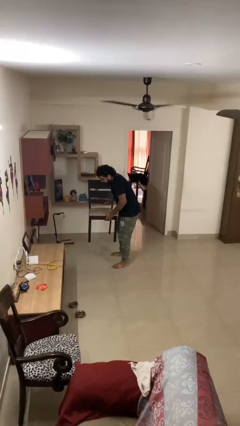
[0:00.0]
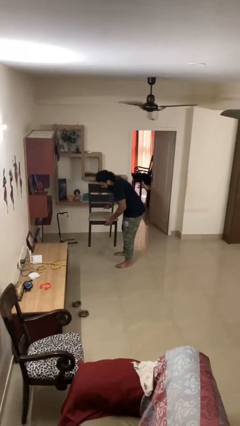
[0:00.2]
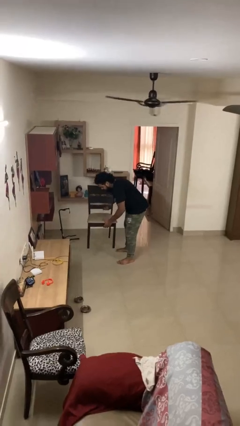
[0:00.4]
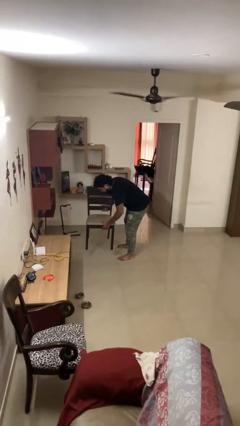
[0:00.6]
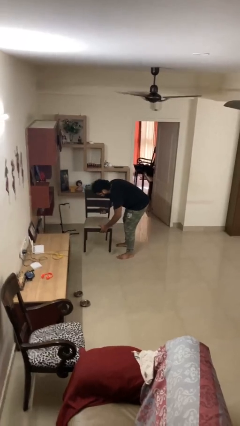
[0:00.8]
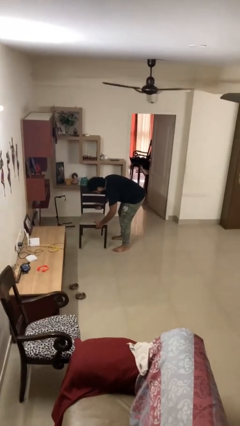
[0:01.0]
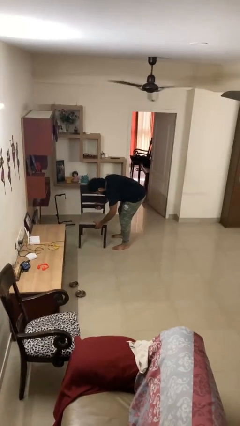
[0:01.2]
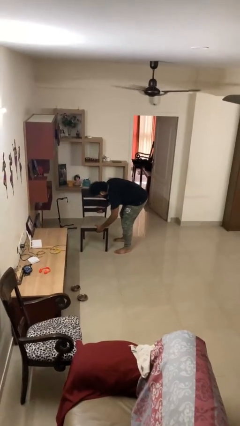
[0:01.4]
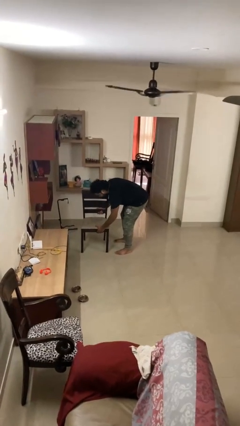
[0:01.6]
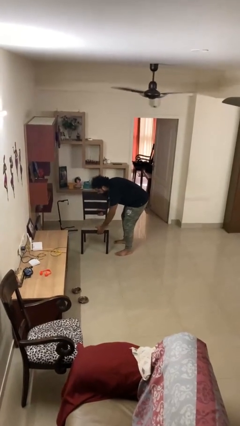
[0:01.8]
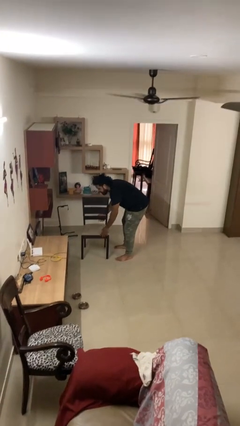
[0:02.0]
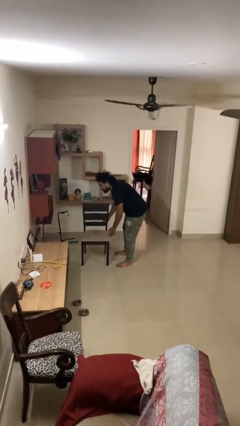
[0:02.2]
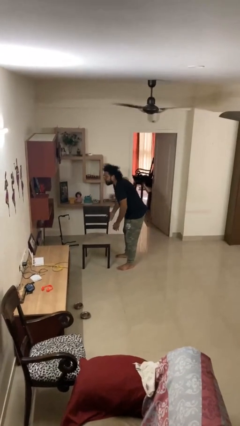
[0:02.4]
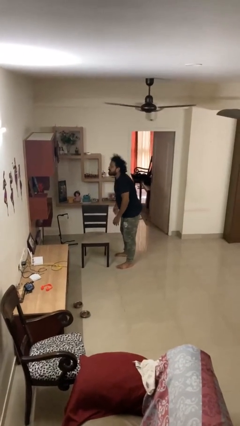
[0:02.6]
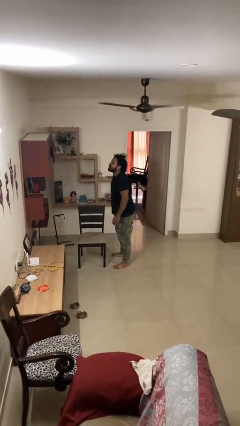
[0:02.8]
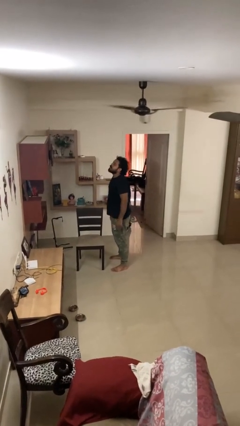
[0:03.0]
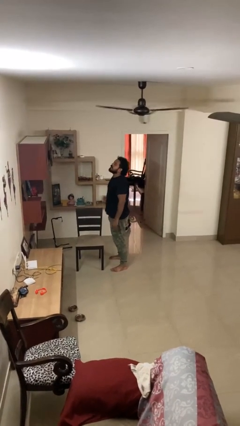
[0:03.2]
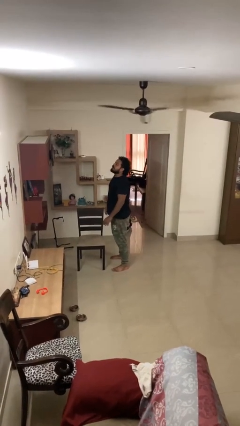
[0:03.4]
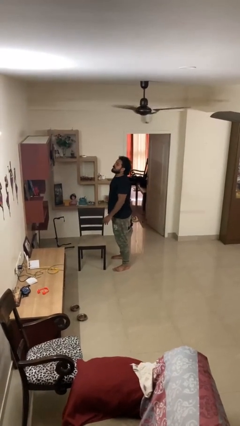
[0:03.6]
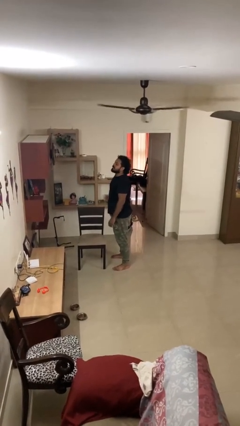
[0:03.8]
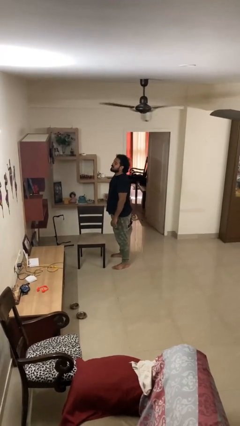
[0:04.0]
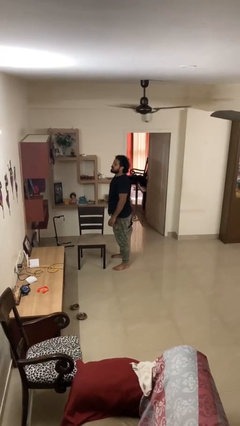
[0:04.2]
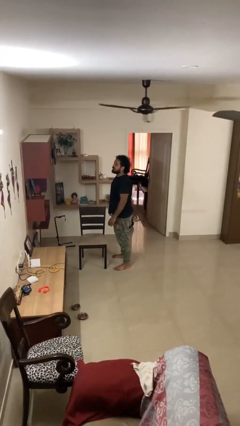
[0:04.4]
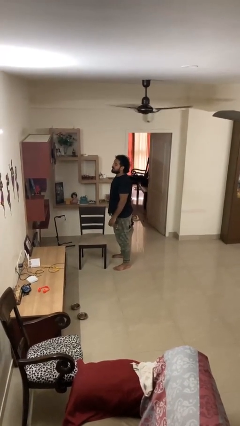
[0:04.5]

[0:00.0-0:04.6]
person puts down object on floor

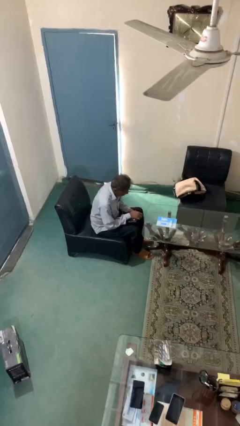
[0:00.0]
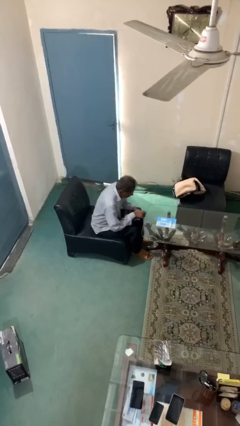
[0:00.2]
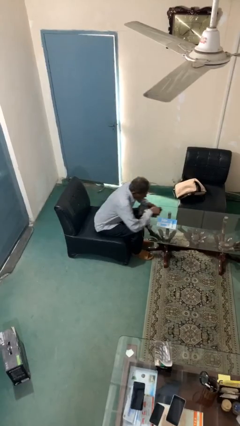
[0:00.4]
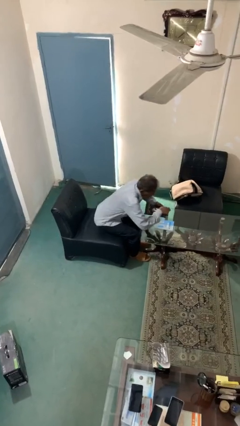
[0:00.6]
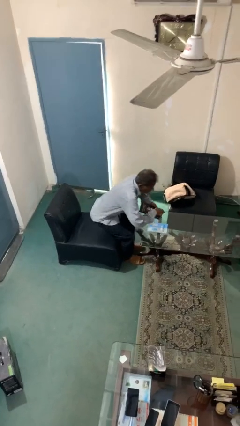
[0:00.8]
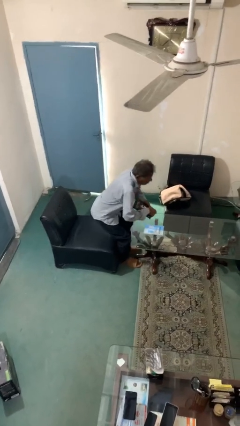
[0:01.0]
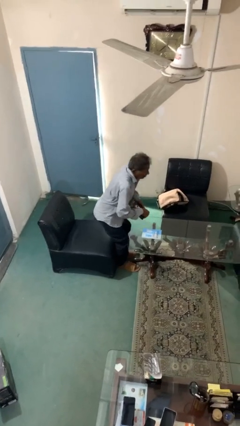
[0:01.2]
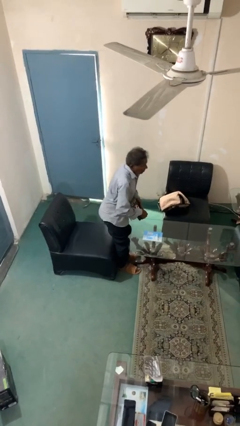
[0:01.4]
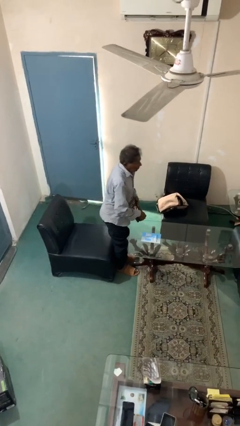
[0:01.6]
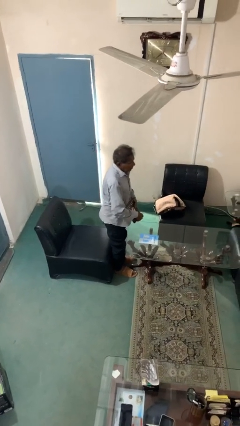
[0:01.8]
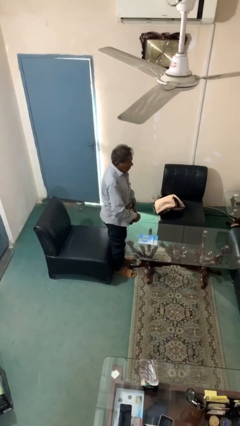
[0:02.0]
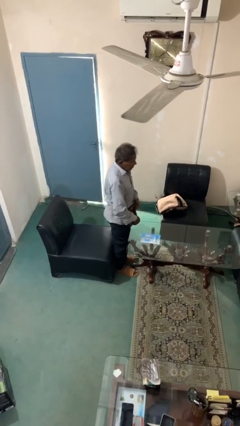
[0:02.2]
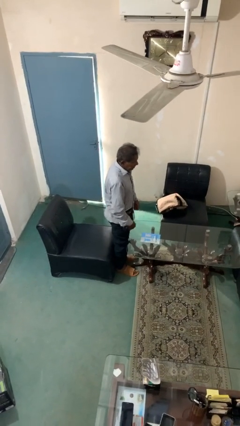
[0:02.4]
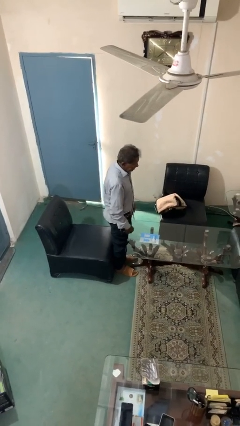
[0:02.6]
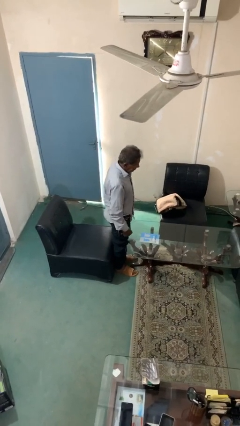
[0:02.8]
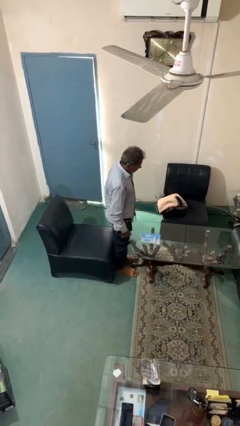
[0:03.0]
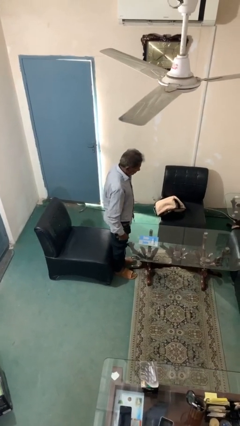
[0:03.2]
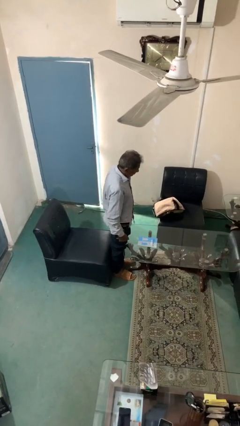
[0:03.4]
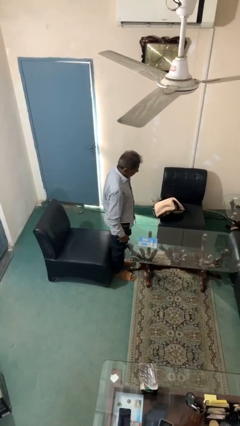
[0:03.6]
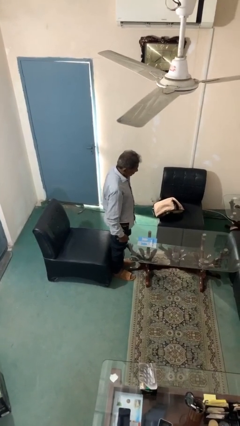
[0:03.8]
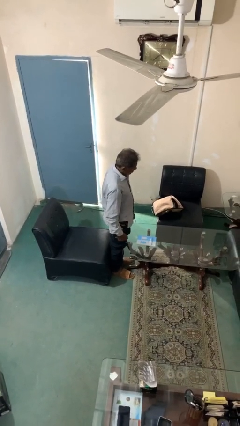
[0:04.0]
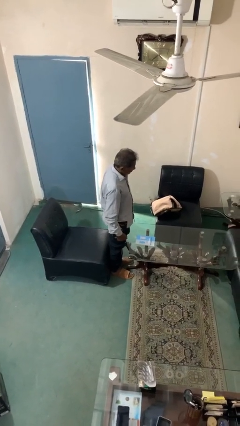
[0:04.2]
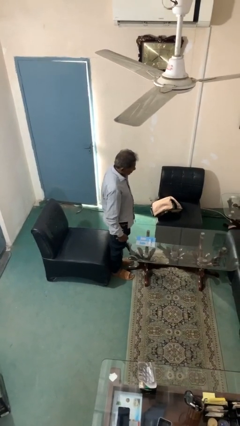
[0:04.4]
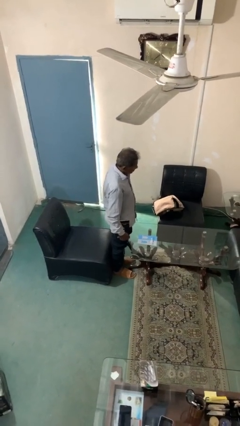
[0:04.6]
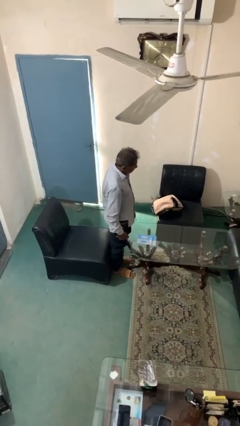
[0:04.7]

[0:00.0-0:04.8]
person stands up

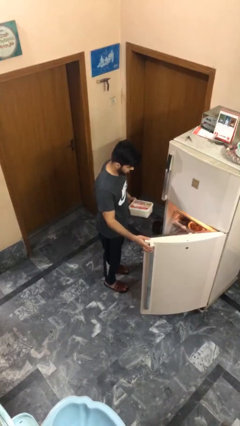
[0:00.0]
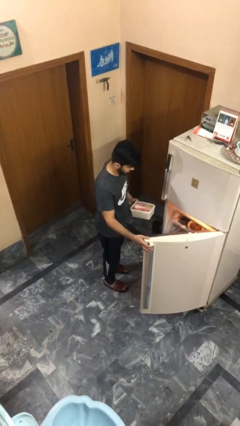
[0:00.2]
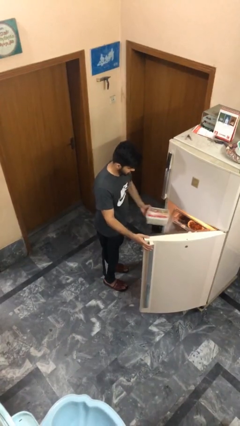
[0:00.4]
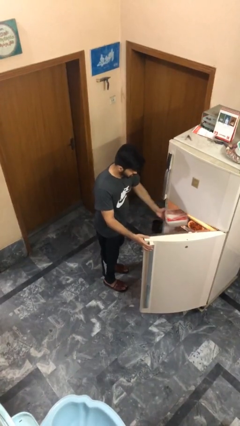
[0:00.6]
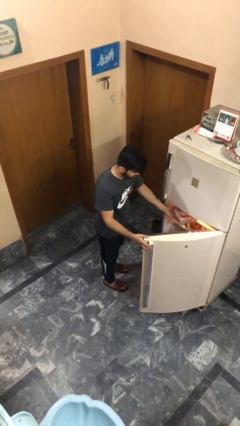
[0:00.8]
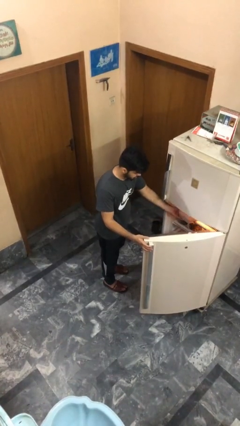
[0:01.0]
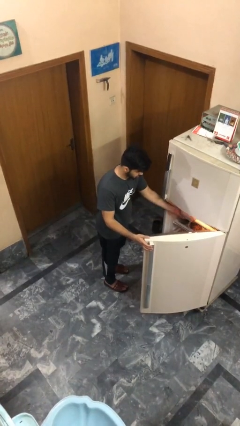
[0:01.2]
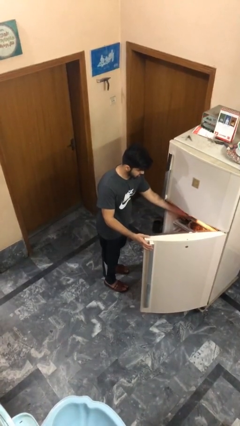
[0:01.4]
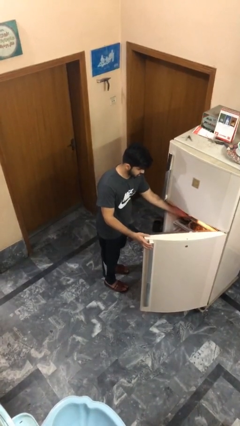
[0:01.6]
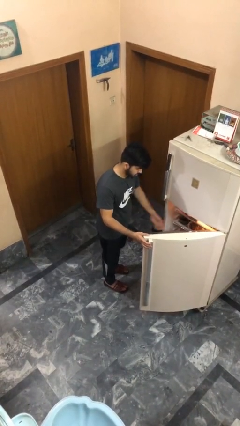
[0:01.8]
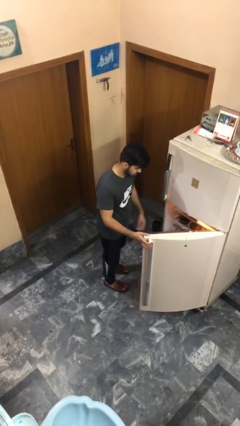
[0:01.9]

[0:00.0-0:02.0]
person puts object into refrigerator

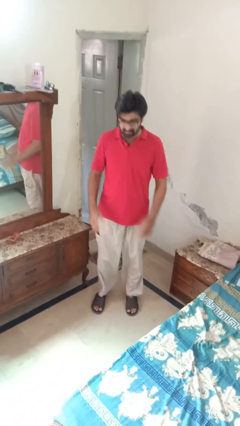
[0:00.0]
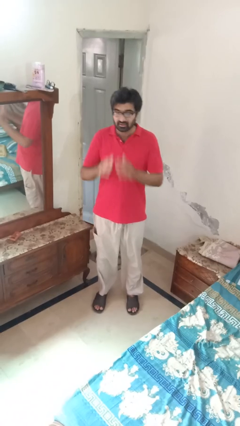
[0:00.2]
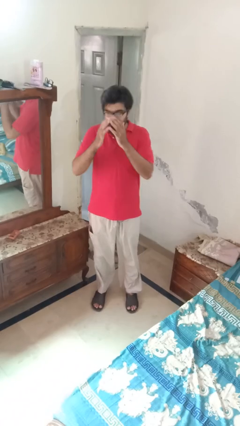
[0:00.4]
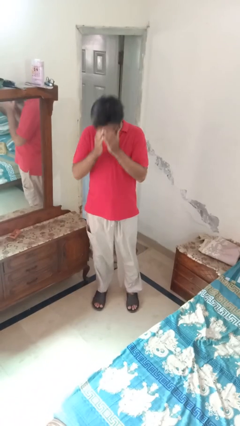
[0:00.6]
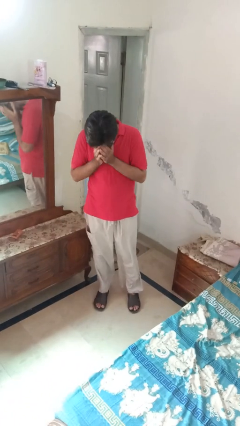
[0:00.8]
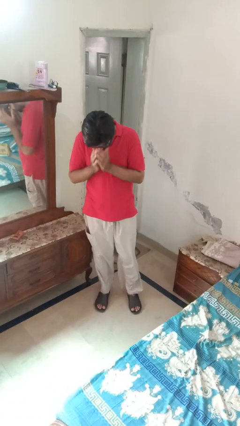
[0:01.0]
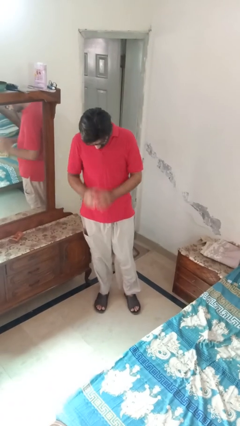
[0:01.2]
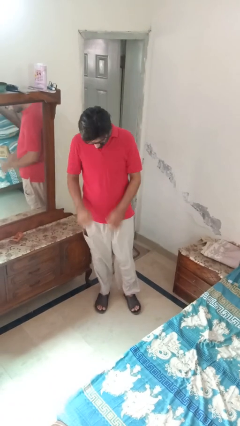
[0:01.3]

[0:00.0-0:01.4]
person sneezes into hand

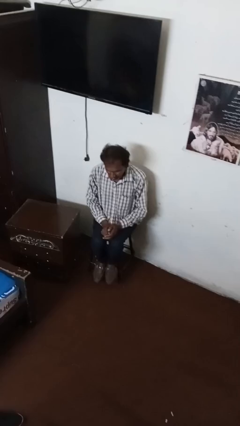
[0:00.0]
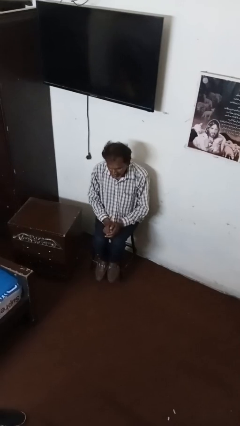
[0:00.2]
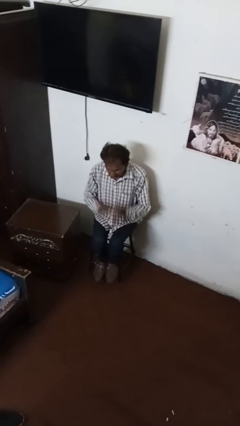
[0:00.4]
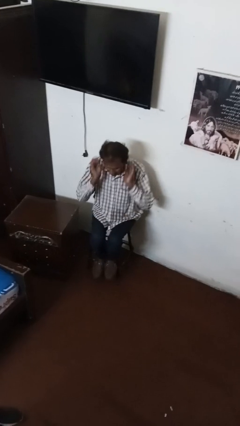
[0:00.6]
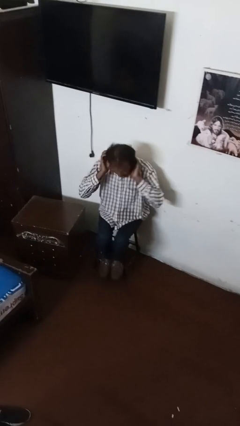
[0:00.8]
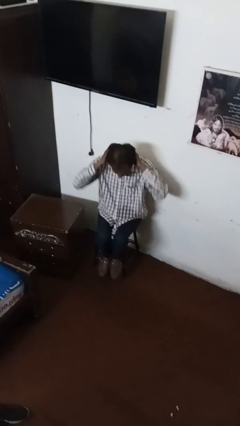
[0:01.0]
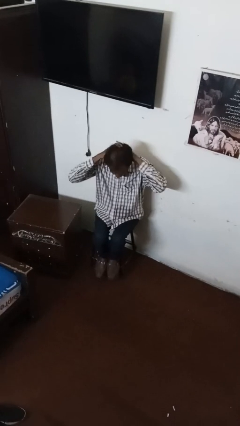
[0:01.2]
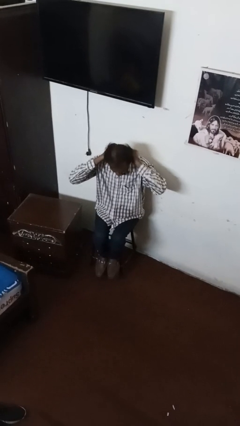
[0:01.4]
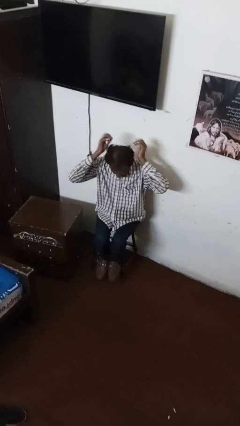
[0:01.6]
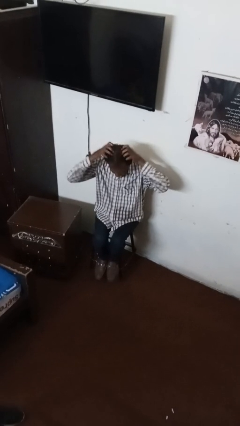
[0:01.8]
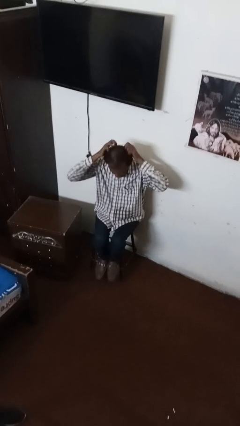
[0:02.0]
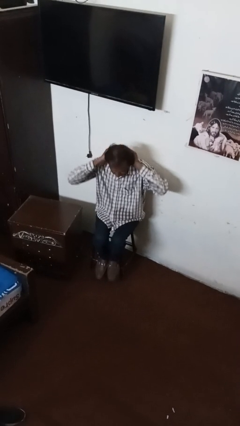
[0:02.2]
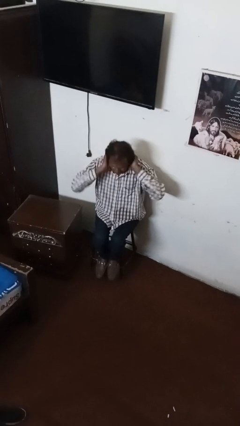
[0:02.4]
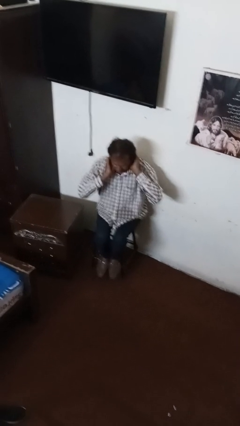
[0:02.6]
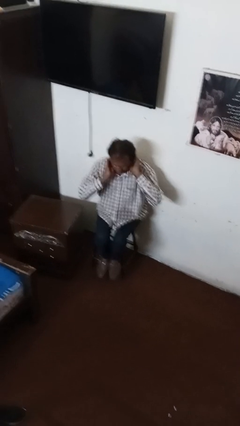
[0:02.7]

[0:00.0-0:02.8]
person strokes hair

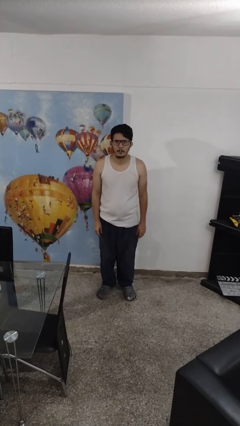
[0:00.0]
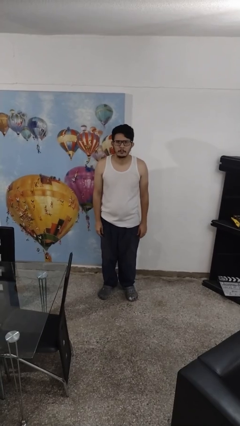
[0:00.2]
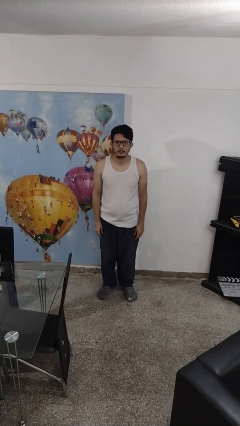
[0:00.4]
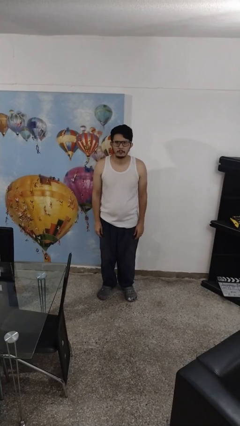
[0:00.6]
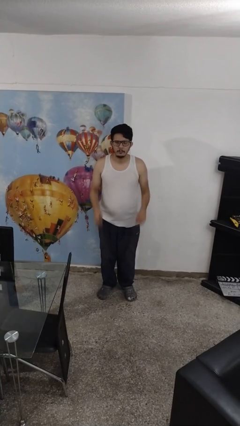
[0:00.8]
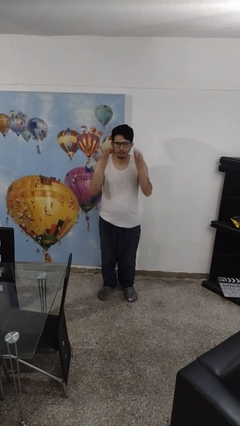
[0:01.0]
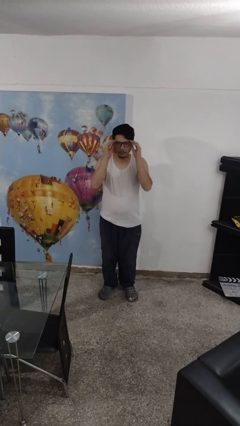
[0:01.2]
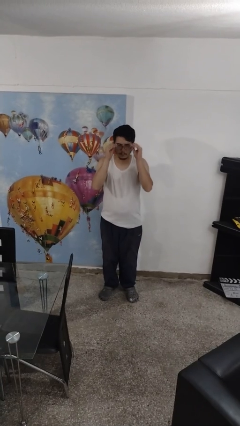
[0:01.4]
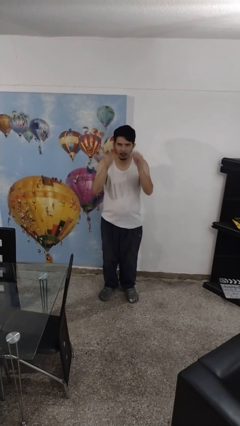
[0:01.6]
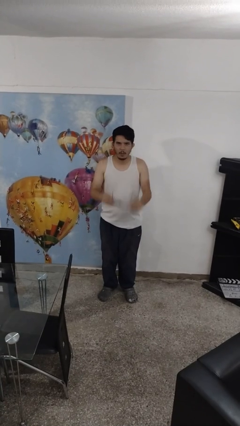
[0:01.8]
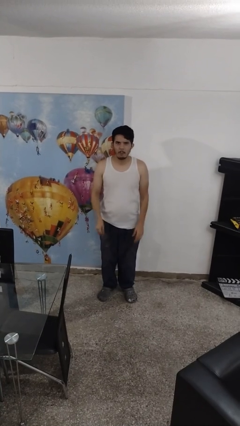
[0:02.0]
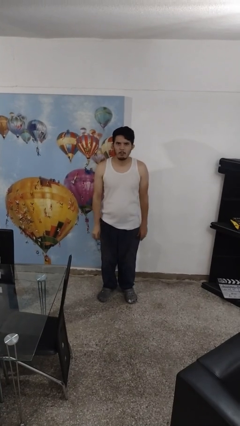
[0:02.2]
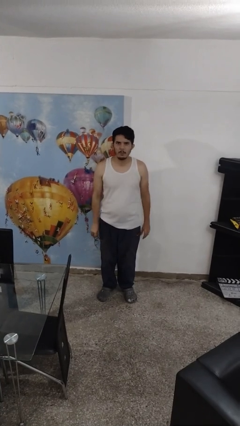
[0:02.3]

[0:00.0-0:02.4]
person takes off glasses
